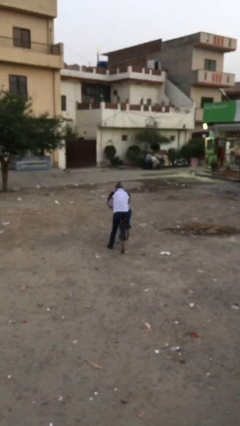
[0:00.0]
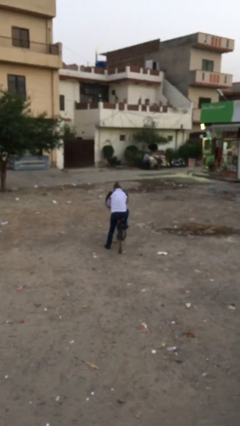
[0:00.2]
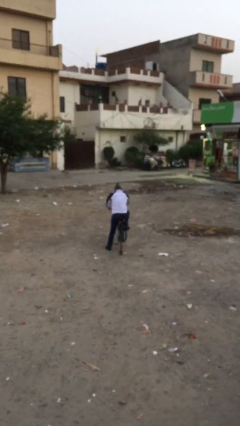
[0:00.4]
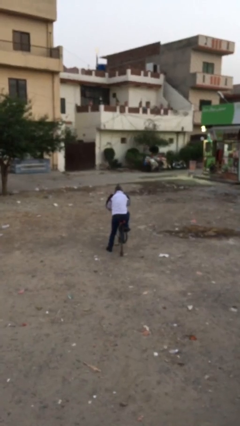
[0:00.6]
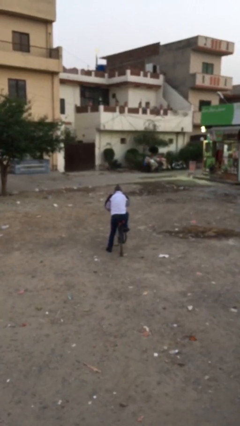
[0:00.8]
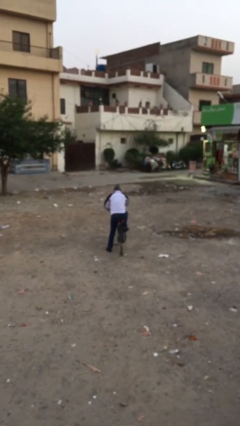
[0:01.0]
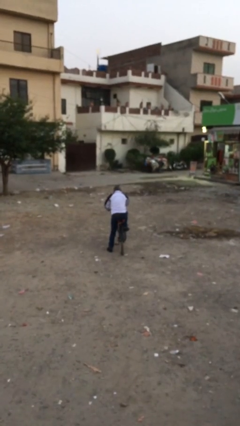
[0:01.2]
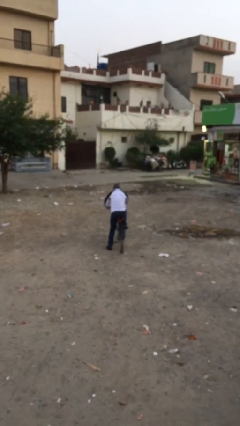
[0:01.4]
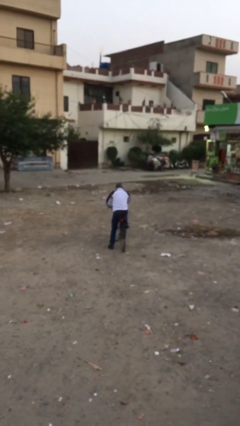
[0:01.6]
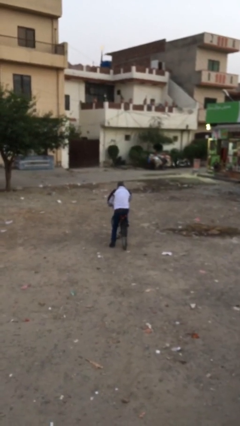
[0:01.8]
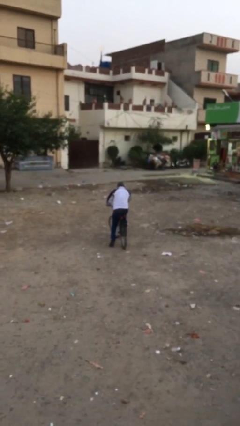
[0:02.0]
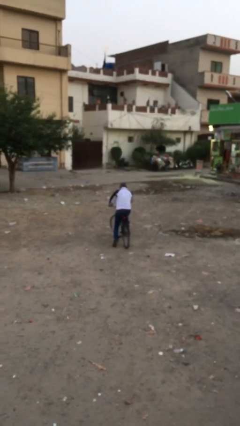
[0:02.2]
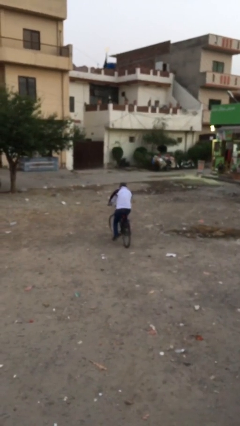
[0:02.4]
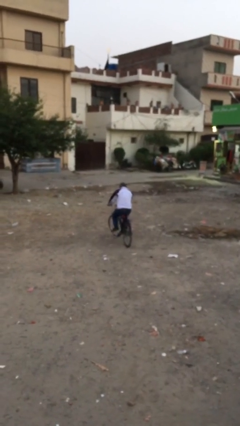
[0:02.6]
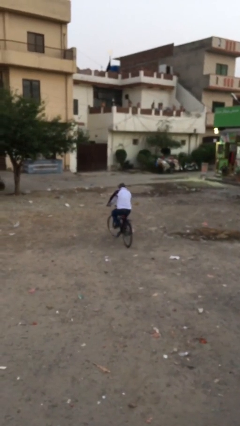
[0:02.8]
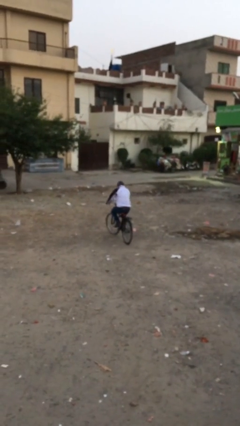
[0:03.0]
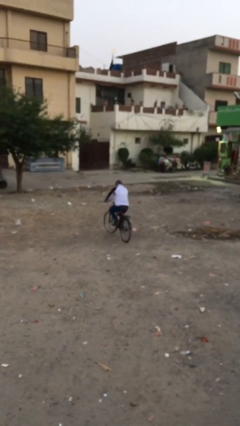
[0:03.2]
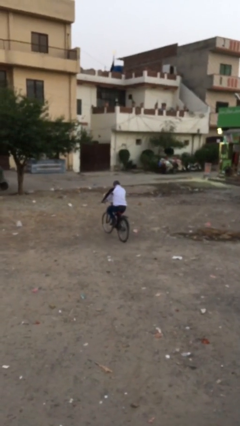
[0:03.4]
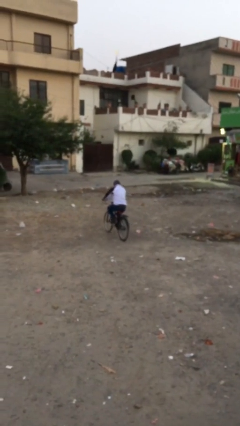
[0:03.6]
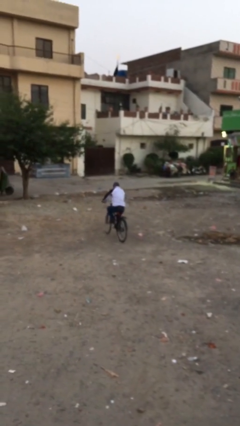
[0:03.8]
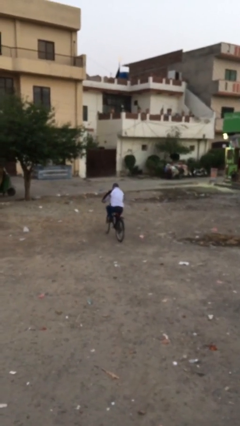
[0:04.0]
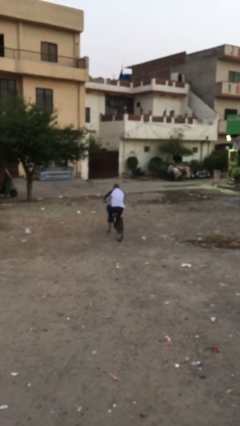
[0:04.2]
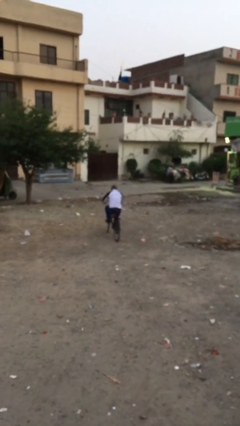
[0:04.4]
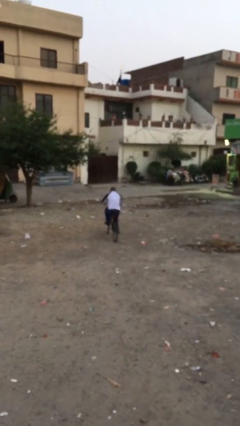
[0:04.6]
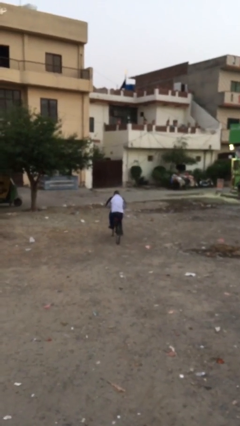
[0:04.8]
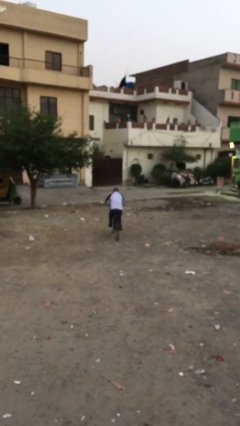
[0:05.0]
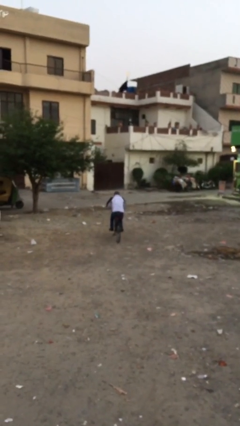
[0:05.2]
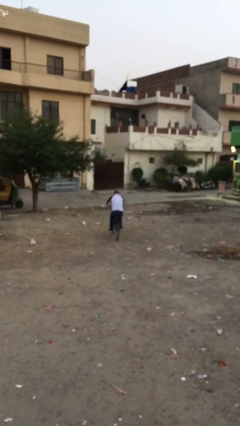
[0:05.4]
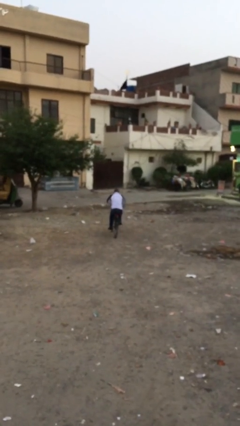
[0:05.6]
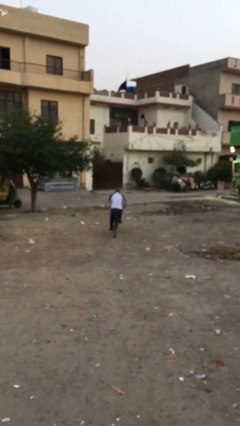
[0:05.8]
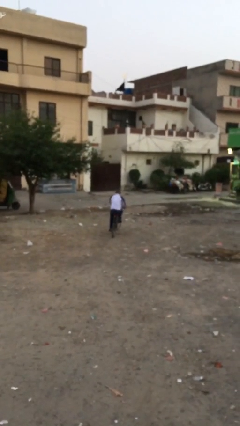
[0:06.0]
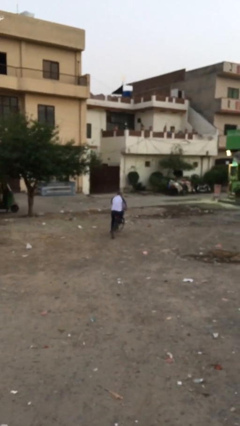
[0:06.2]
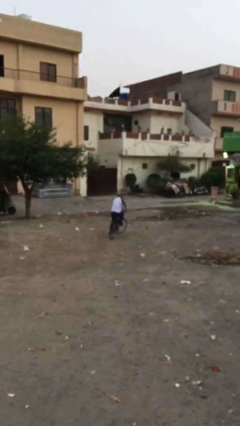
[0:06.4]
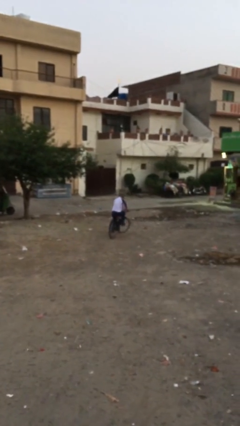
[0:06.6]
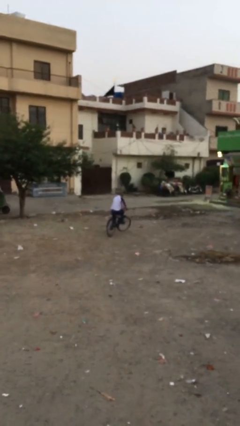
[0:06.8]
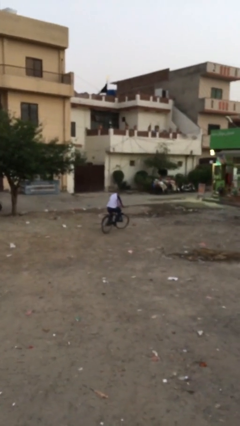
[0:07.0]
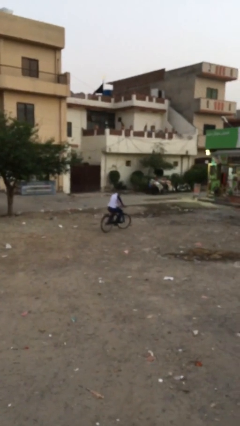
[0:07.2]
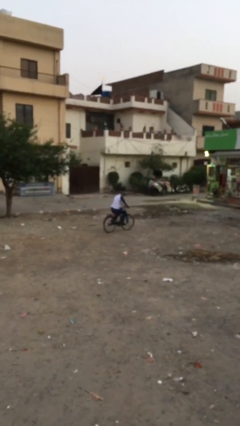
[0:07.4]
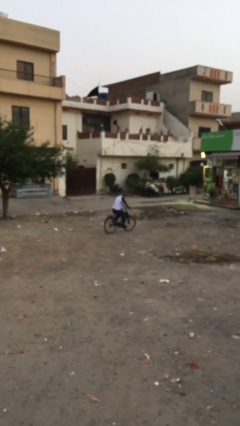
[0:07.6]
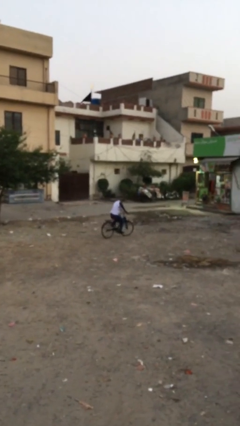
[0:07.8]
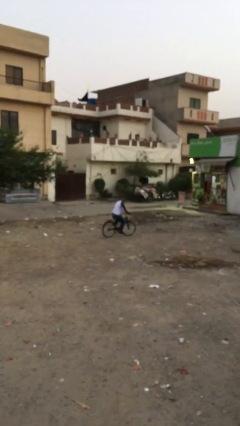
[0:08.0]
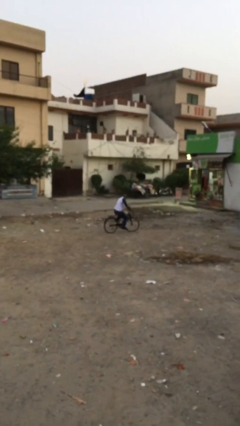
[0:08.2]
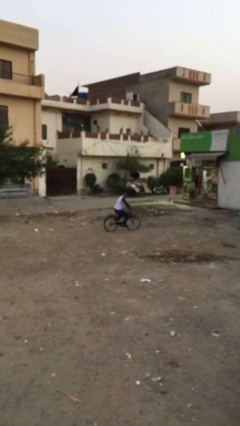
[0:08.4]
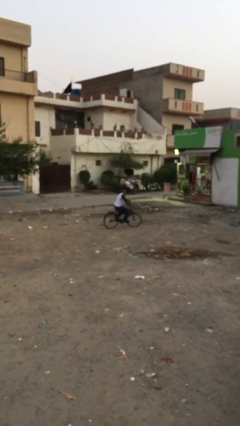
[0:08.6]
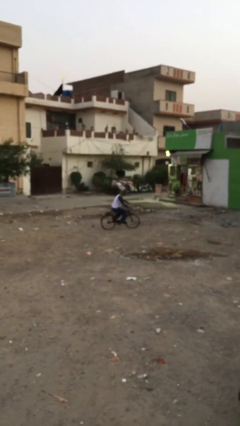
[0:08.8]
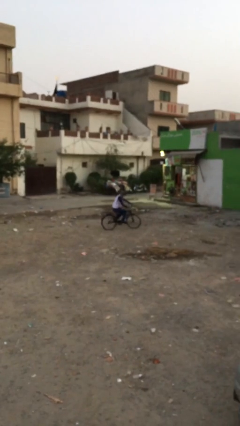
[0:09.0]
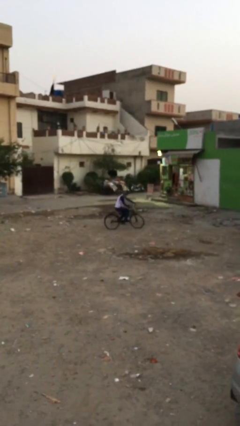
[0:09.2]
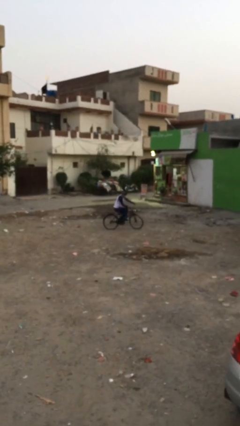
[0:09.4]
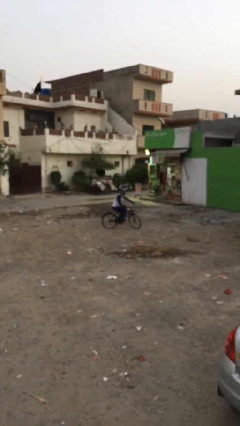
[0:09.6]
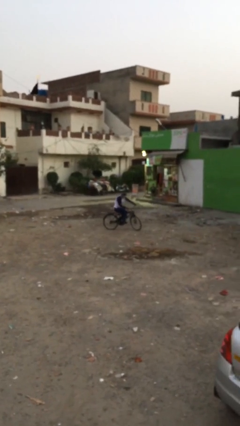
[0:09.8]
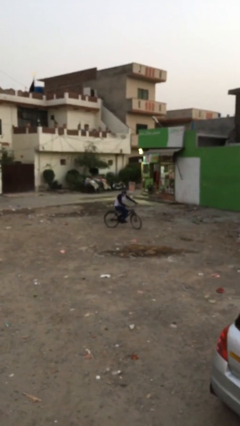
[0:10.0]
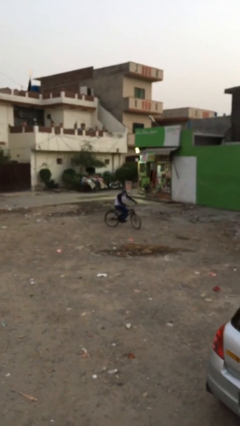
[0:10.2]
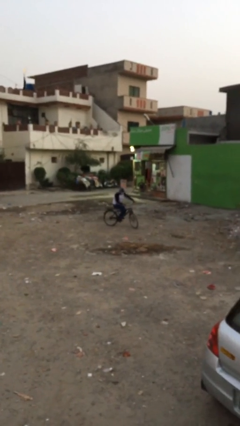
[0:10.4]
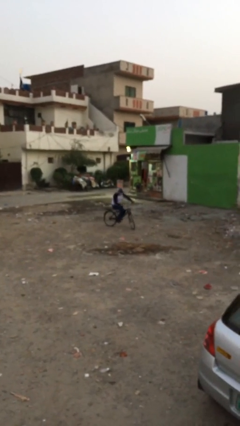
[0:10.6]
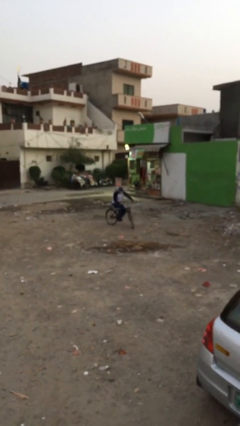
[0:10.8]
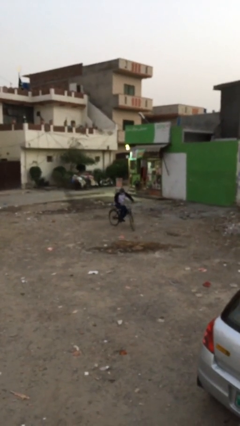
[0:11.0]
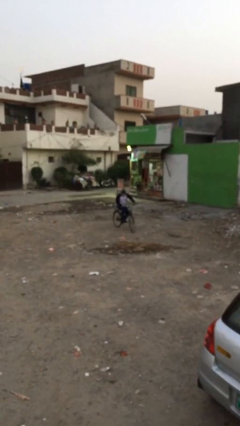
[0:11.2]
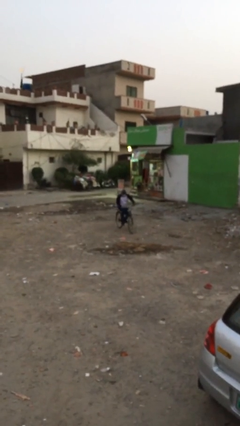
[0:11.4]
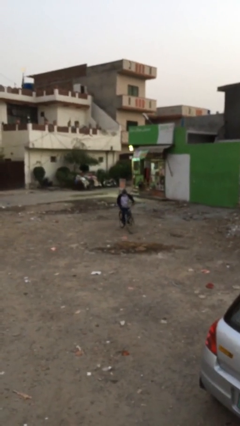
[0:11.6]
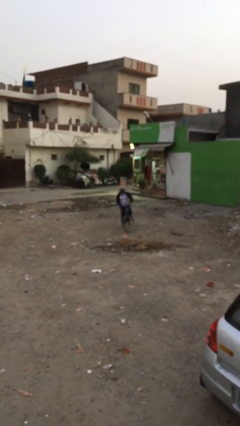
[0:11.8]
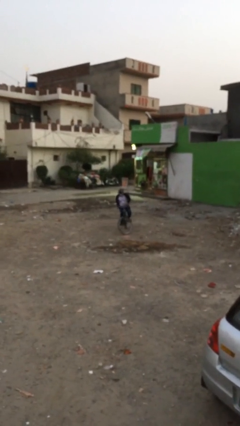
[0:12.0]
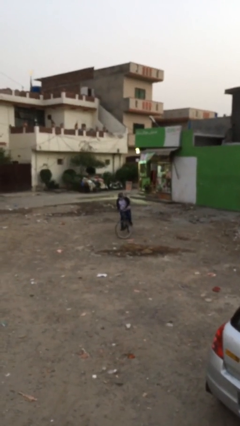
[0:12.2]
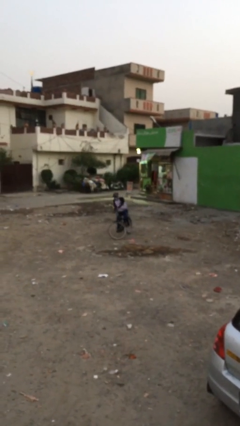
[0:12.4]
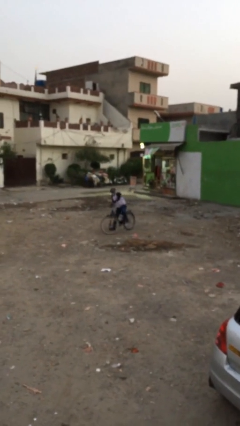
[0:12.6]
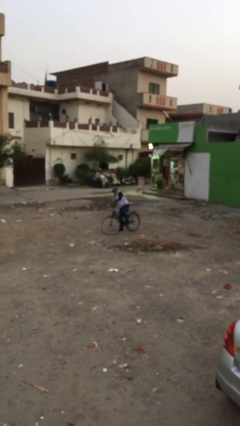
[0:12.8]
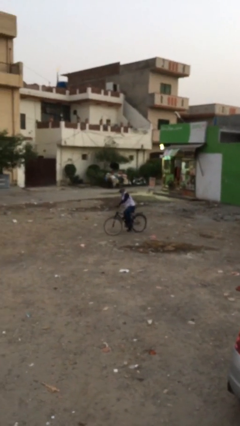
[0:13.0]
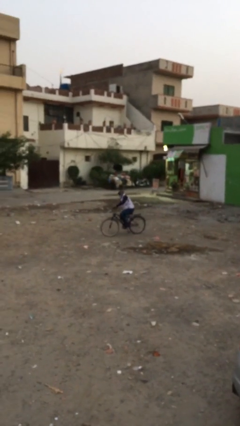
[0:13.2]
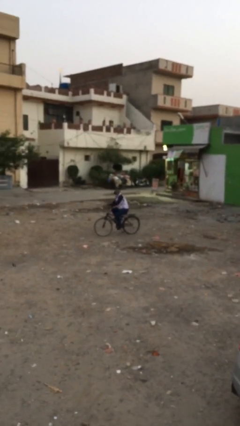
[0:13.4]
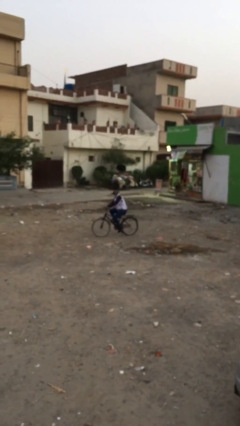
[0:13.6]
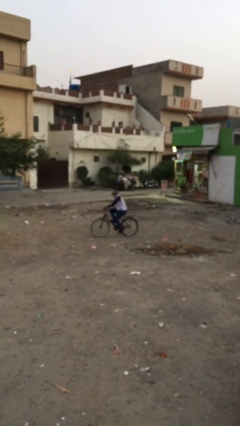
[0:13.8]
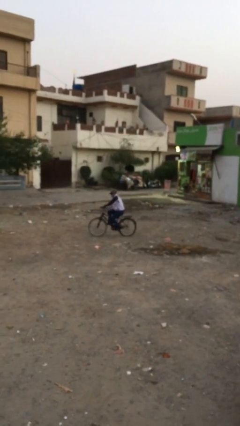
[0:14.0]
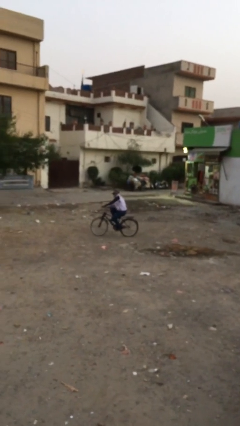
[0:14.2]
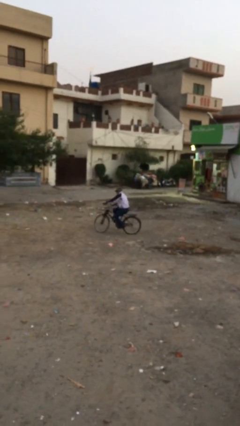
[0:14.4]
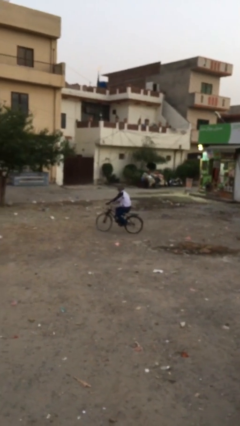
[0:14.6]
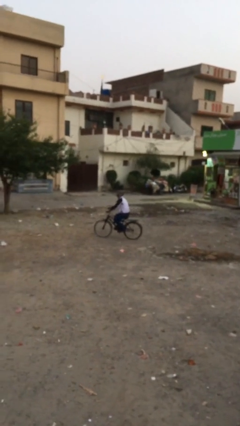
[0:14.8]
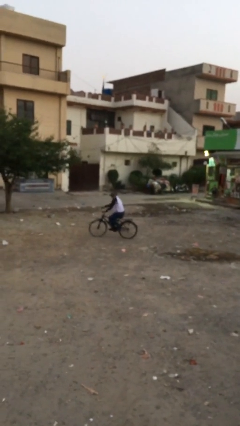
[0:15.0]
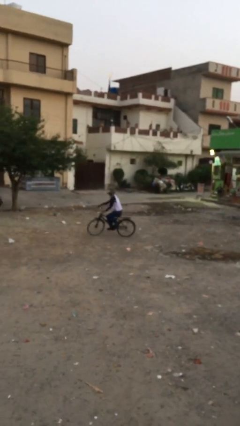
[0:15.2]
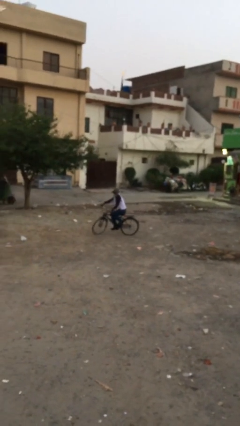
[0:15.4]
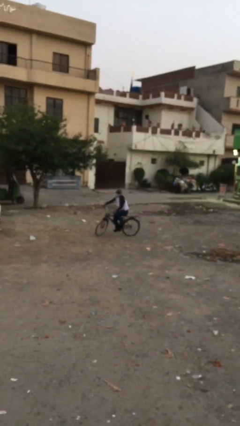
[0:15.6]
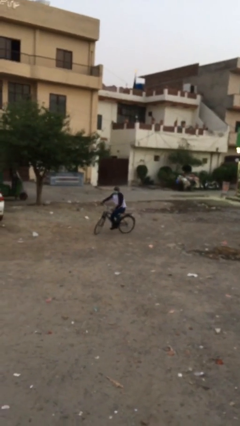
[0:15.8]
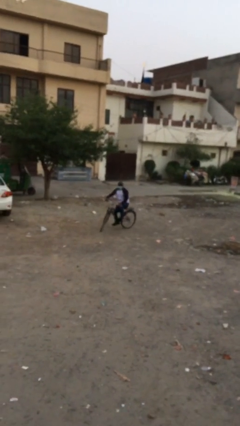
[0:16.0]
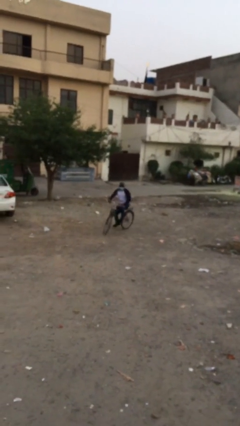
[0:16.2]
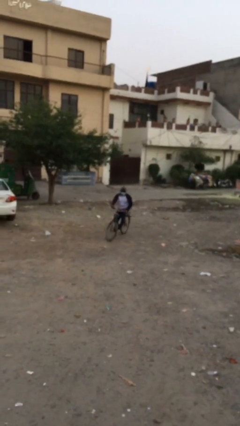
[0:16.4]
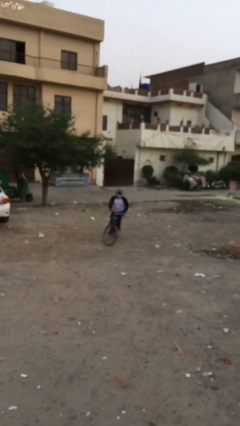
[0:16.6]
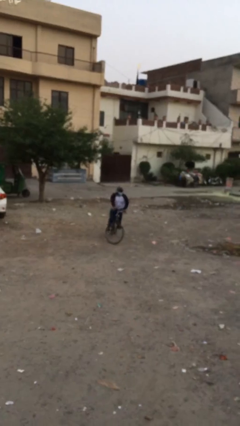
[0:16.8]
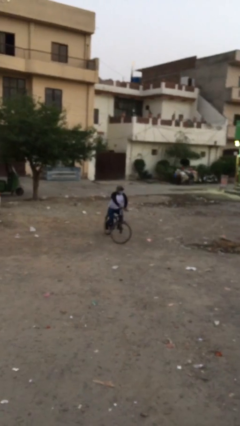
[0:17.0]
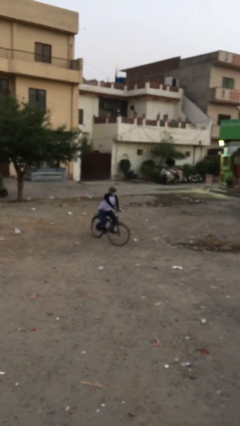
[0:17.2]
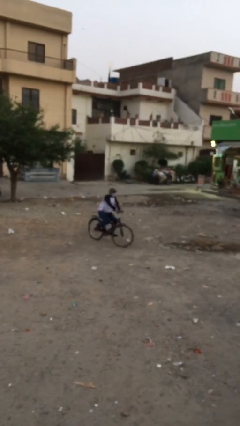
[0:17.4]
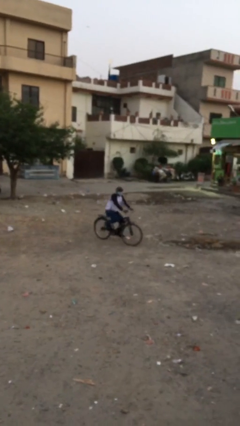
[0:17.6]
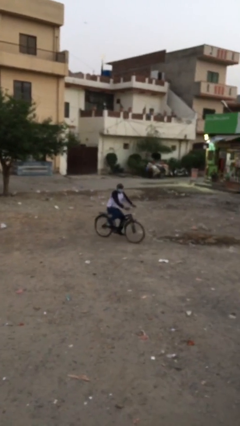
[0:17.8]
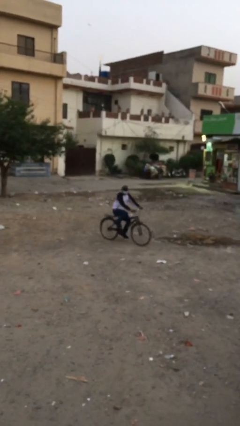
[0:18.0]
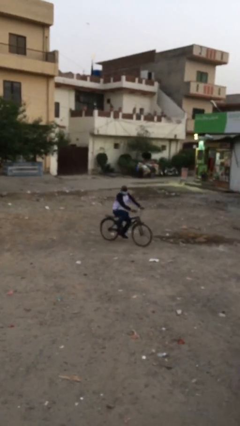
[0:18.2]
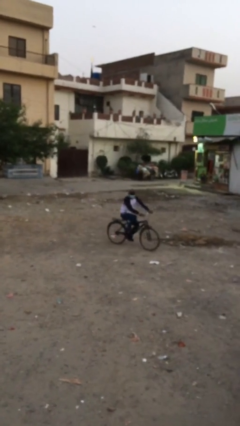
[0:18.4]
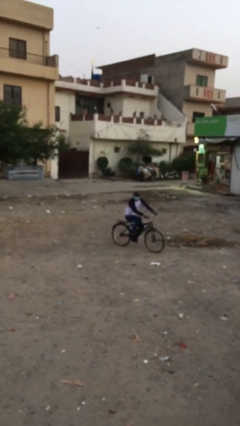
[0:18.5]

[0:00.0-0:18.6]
person rides bicycle
